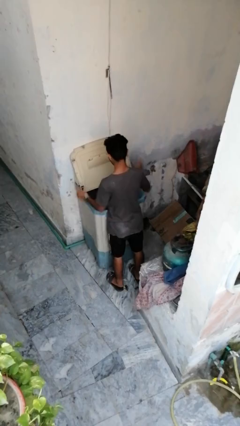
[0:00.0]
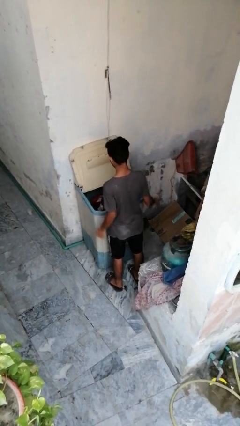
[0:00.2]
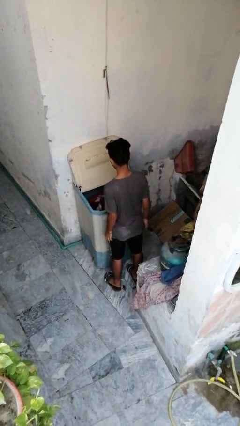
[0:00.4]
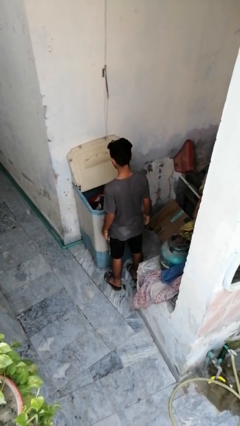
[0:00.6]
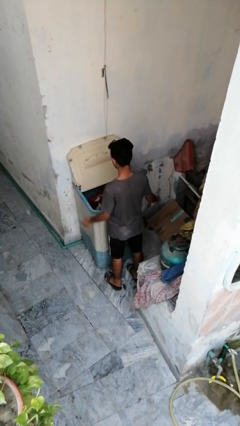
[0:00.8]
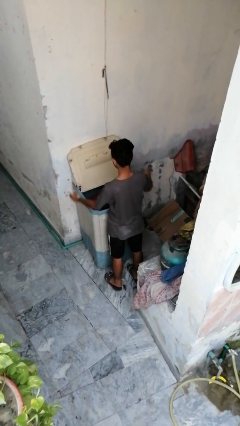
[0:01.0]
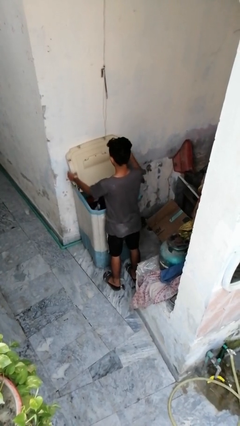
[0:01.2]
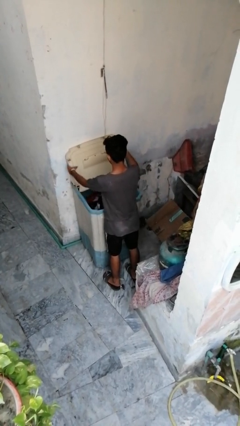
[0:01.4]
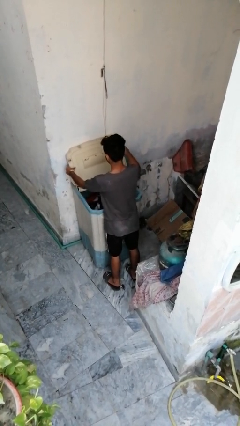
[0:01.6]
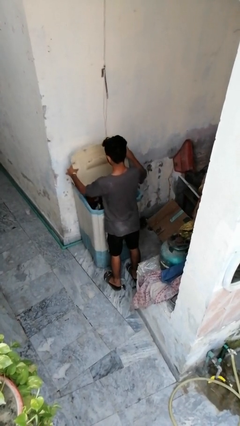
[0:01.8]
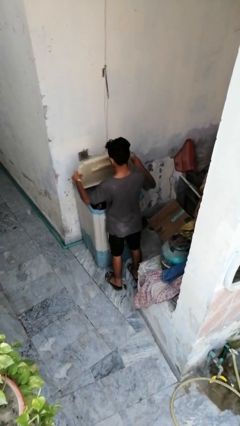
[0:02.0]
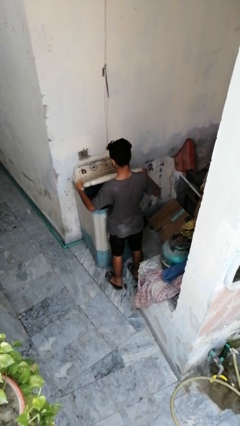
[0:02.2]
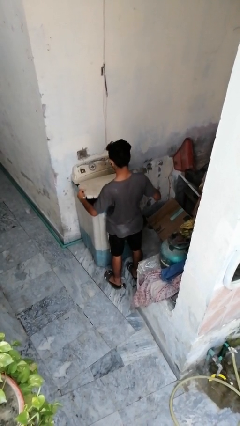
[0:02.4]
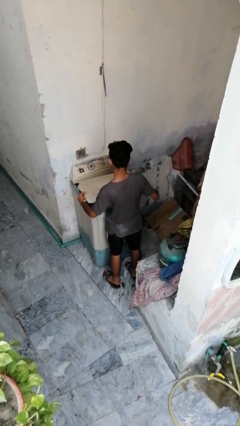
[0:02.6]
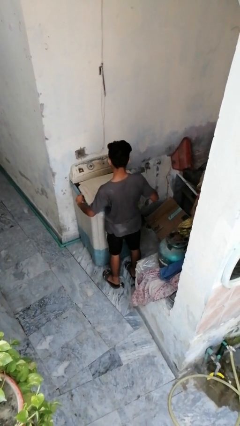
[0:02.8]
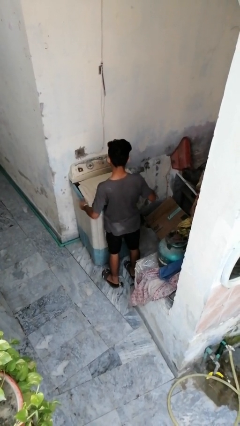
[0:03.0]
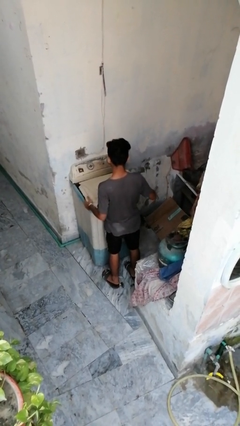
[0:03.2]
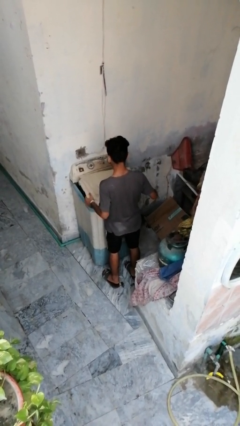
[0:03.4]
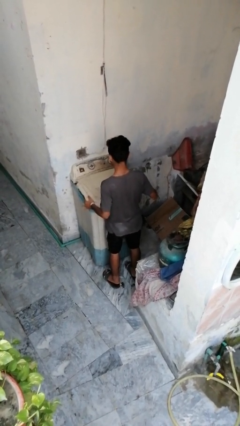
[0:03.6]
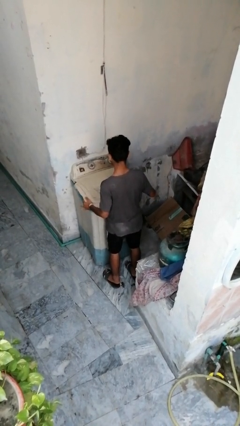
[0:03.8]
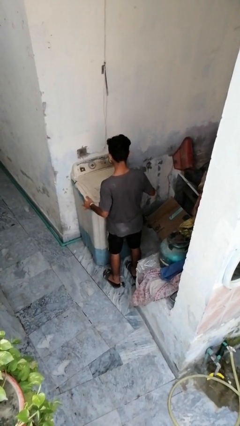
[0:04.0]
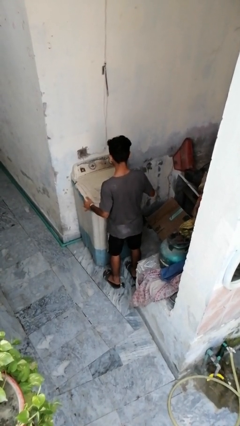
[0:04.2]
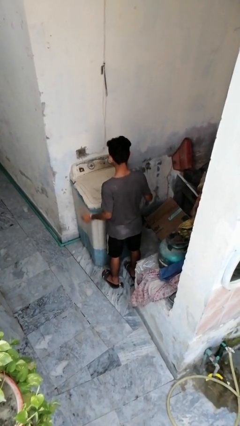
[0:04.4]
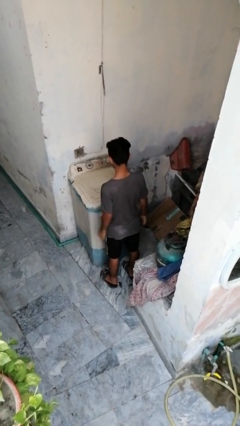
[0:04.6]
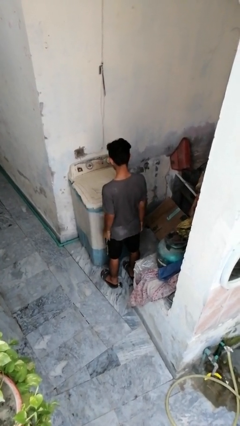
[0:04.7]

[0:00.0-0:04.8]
person closes clothes washer

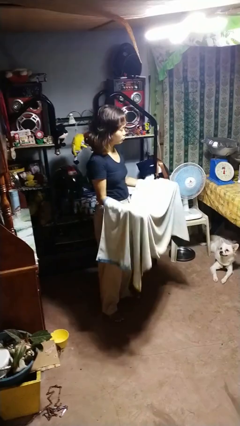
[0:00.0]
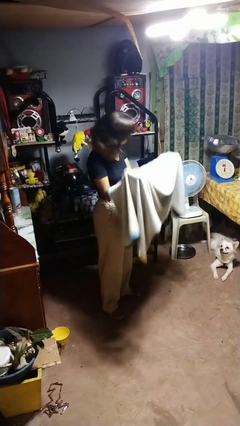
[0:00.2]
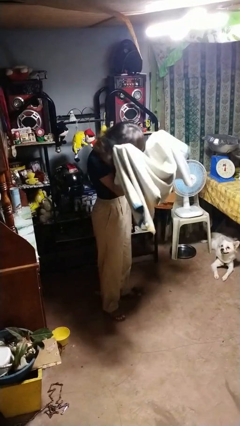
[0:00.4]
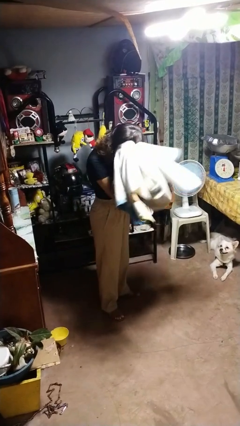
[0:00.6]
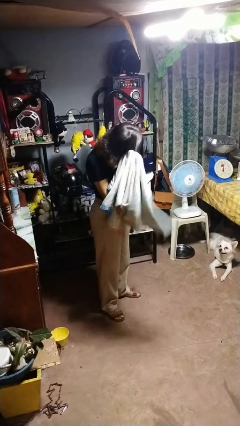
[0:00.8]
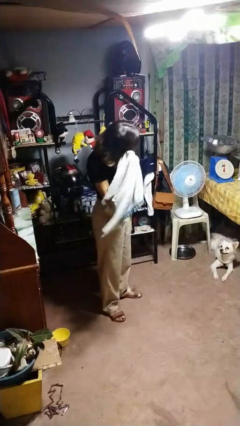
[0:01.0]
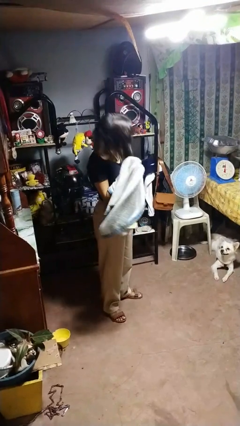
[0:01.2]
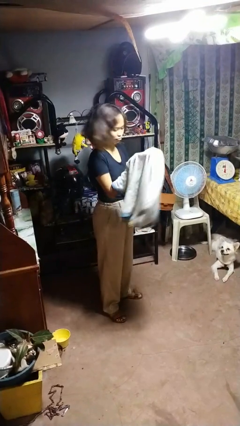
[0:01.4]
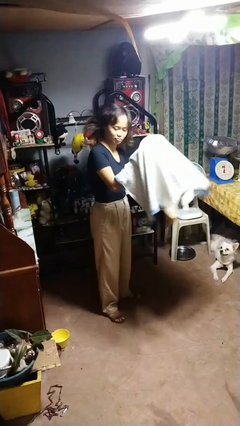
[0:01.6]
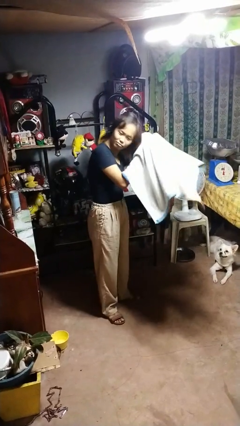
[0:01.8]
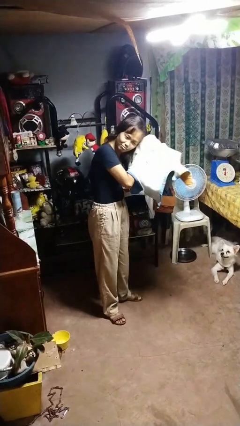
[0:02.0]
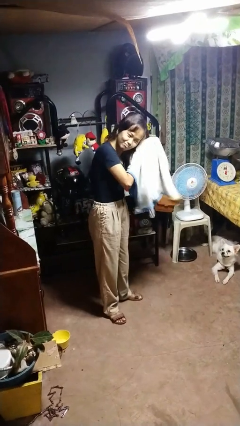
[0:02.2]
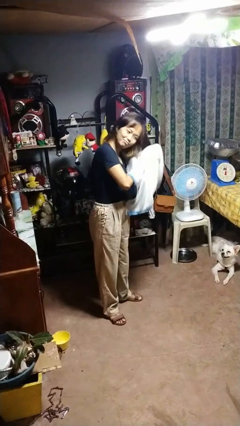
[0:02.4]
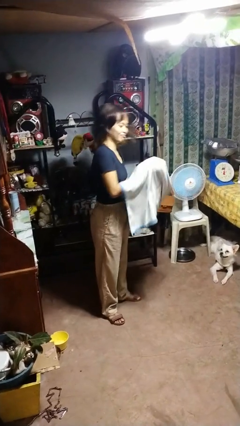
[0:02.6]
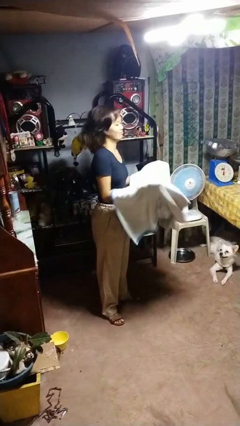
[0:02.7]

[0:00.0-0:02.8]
person dries hair with towel

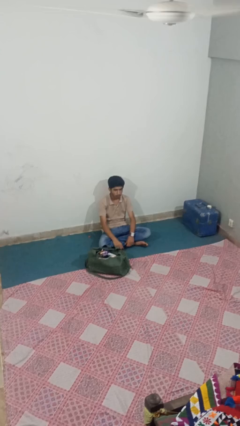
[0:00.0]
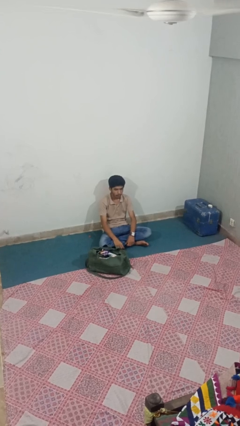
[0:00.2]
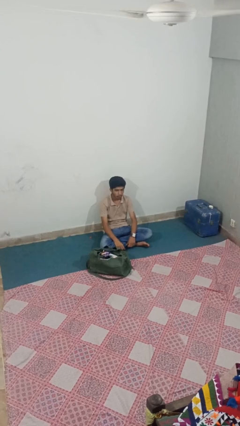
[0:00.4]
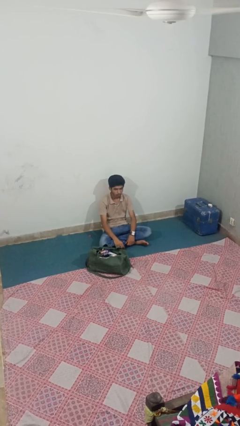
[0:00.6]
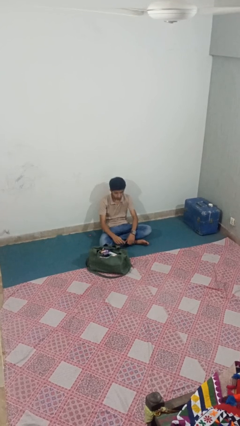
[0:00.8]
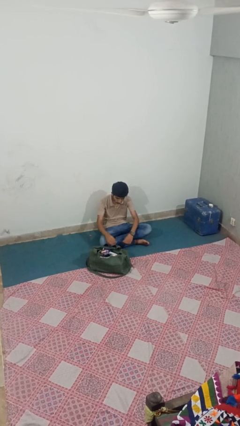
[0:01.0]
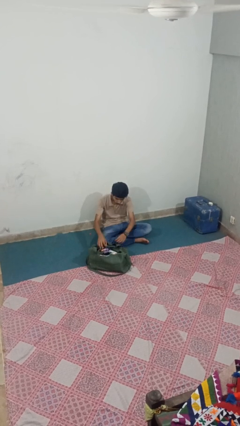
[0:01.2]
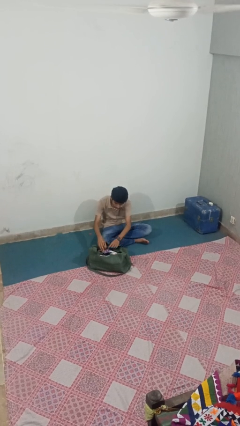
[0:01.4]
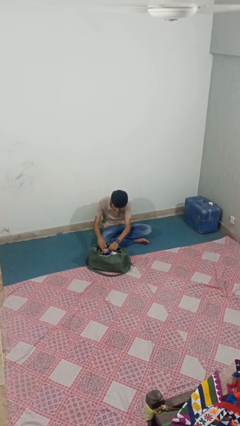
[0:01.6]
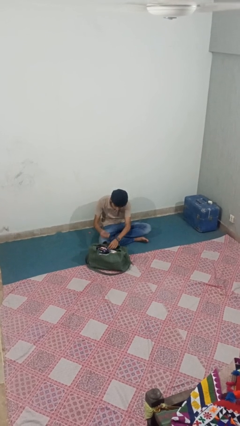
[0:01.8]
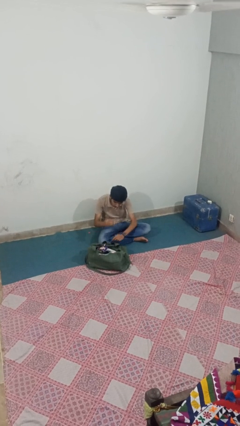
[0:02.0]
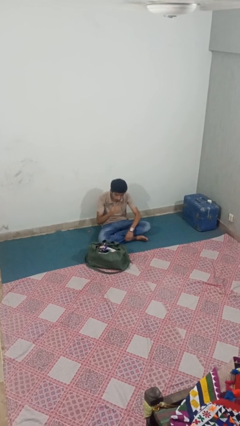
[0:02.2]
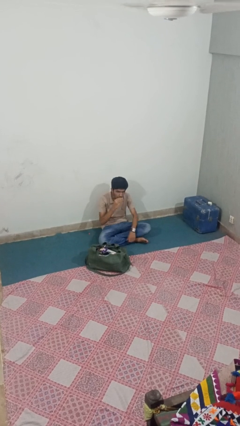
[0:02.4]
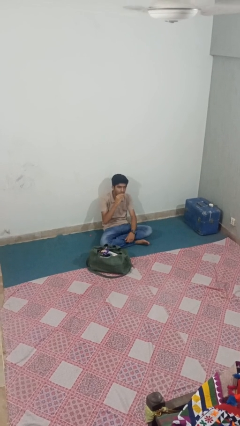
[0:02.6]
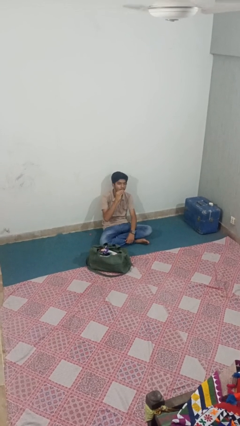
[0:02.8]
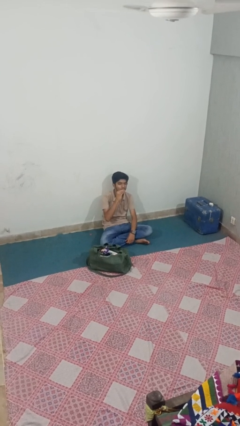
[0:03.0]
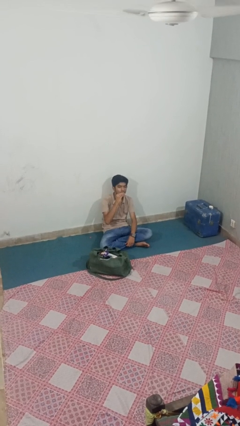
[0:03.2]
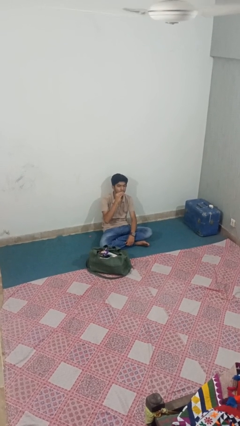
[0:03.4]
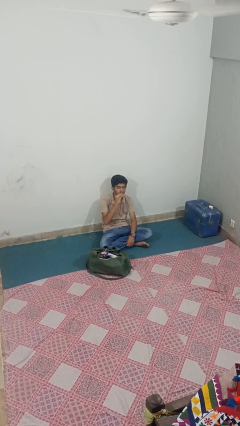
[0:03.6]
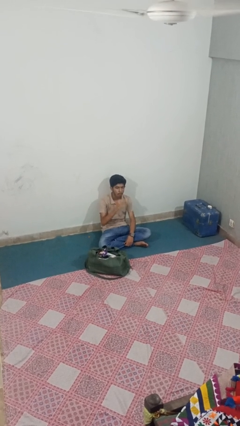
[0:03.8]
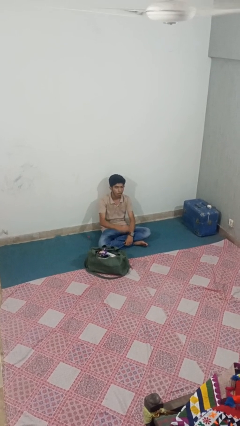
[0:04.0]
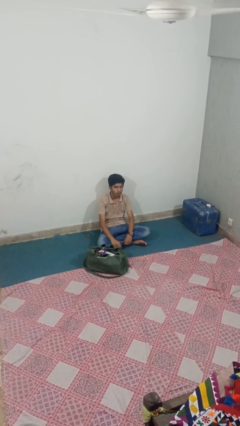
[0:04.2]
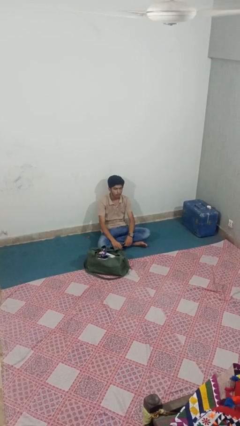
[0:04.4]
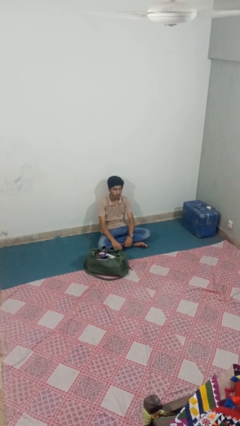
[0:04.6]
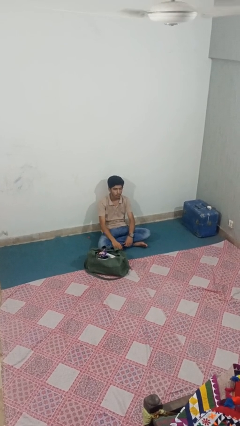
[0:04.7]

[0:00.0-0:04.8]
person eats snack from bag

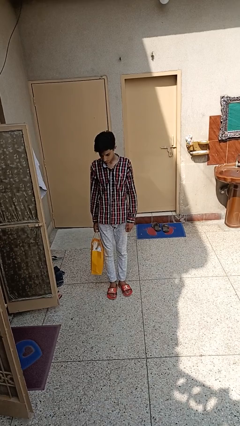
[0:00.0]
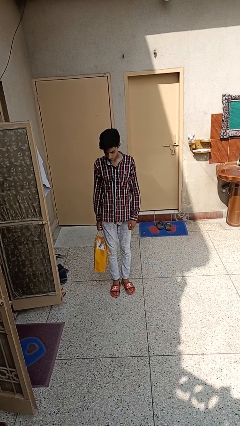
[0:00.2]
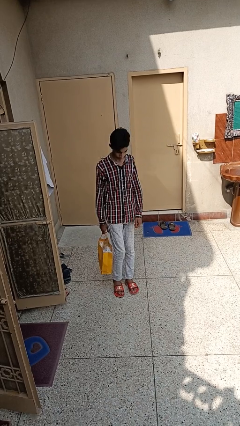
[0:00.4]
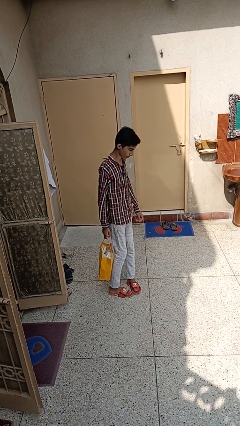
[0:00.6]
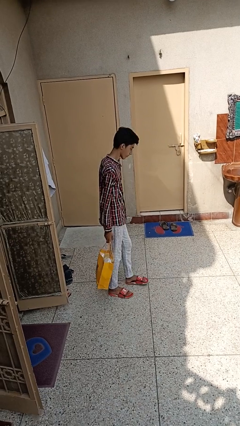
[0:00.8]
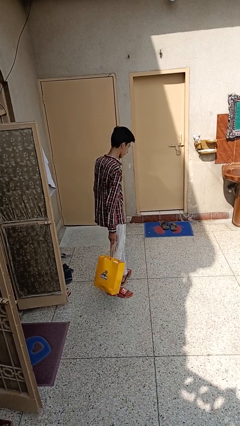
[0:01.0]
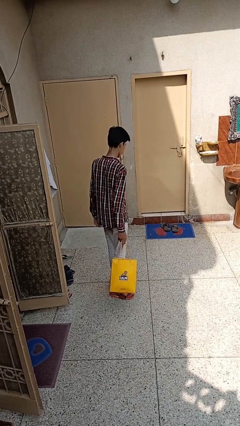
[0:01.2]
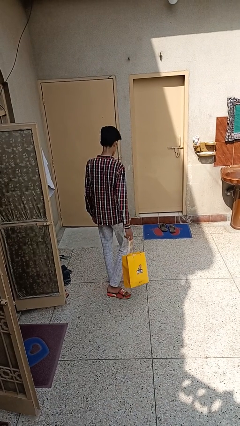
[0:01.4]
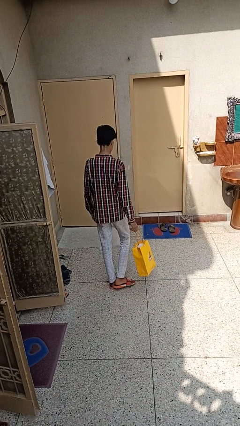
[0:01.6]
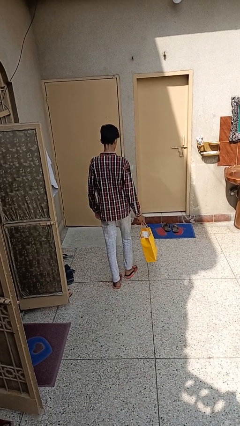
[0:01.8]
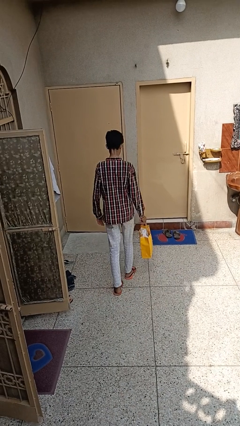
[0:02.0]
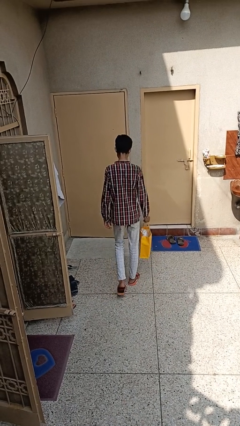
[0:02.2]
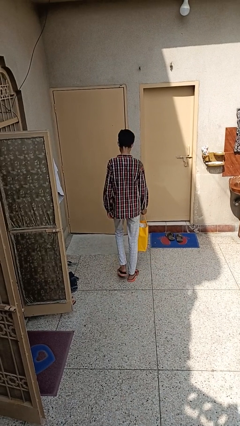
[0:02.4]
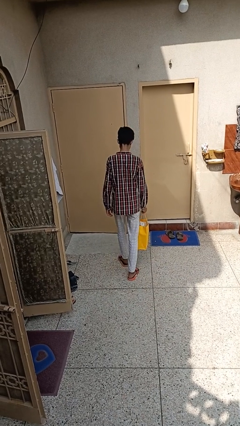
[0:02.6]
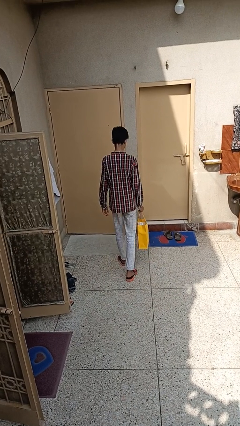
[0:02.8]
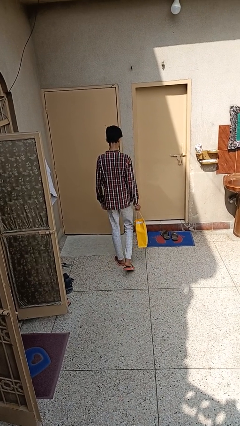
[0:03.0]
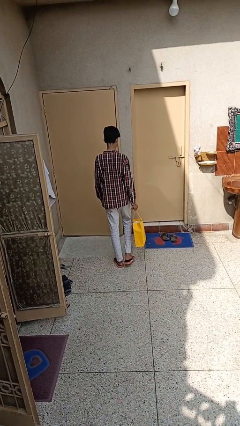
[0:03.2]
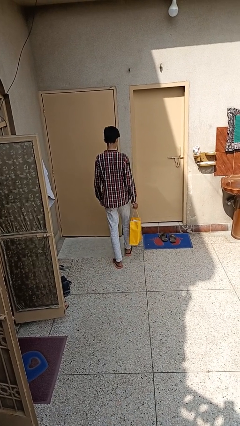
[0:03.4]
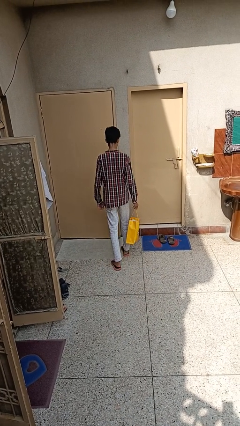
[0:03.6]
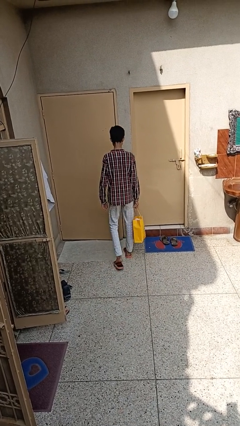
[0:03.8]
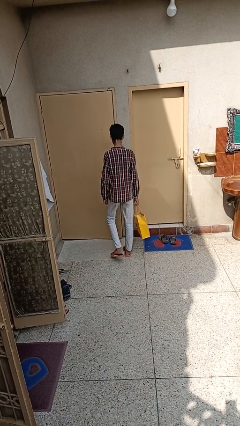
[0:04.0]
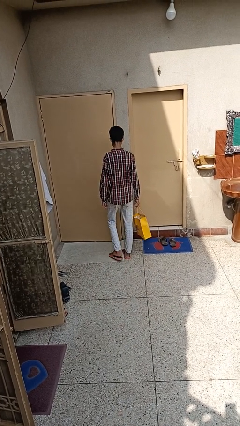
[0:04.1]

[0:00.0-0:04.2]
person carries groceries

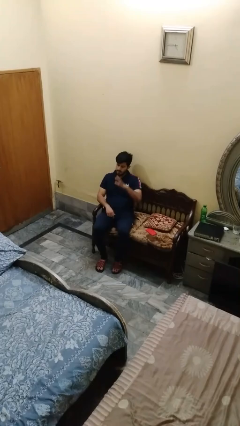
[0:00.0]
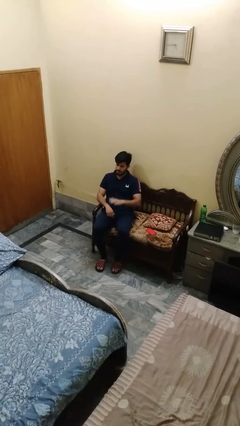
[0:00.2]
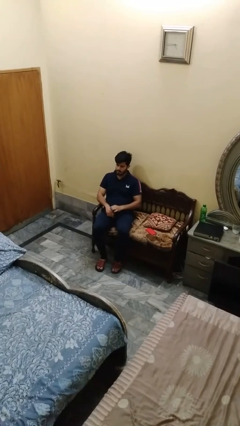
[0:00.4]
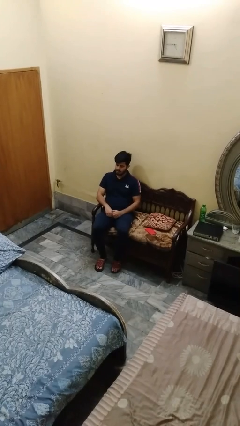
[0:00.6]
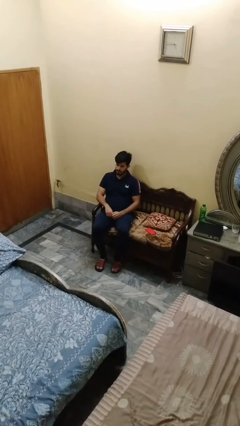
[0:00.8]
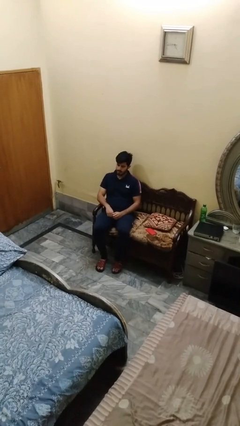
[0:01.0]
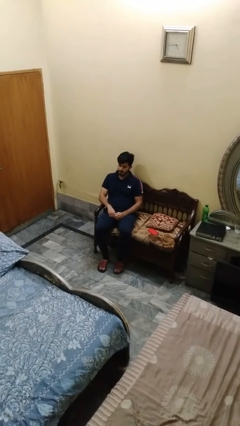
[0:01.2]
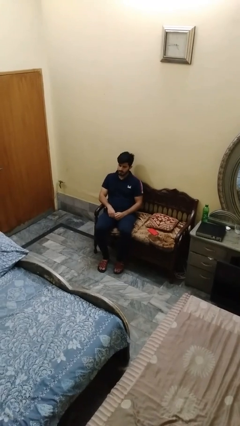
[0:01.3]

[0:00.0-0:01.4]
person gestures lower hand
